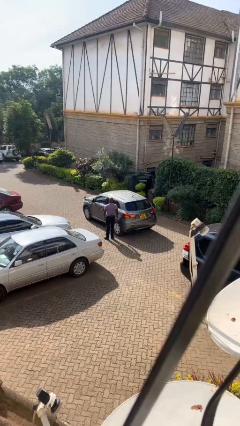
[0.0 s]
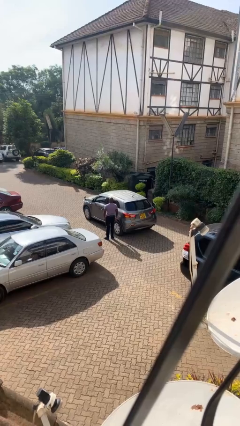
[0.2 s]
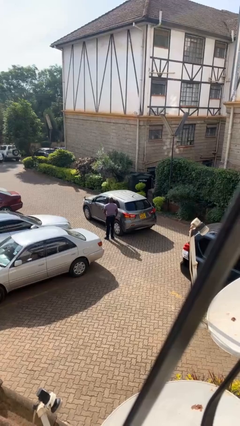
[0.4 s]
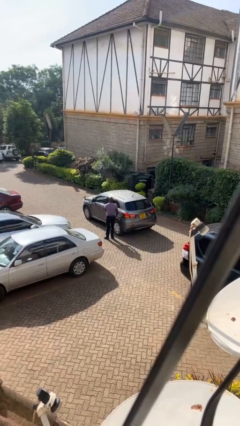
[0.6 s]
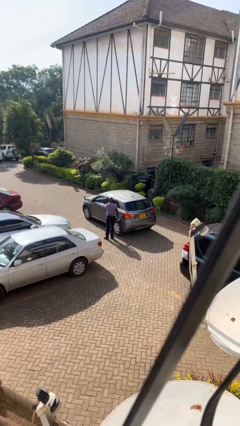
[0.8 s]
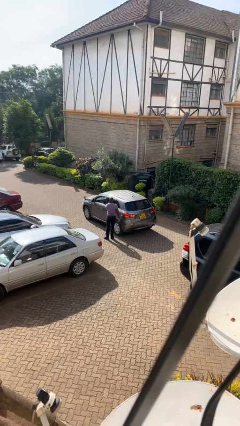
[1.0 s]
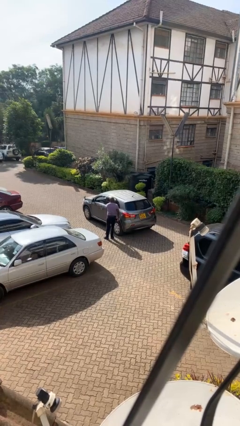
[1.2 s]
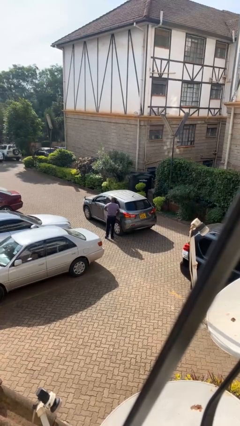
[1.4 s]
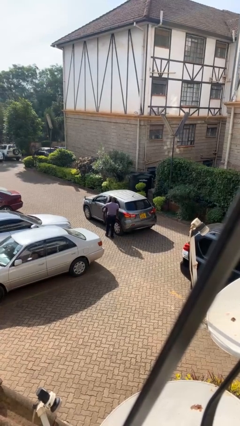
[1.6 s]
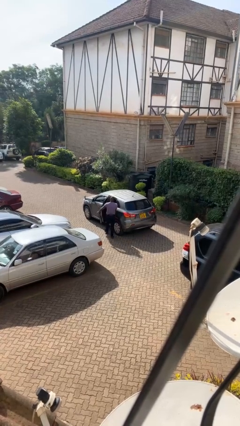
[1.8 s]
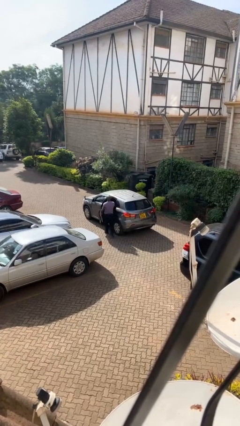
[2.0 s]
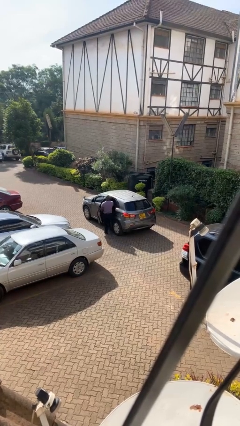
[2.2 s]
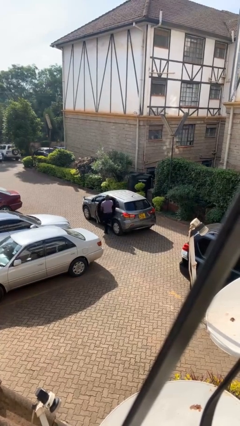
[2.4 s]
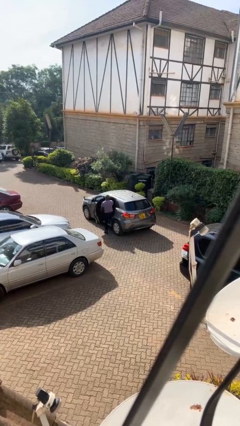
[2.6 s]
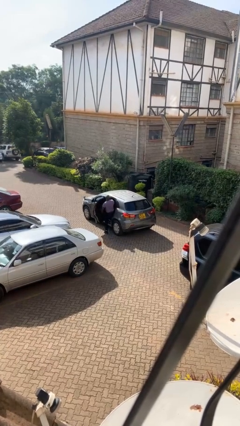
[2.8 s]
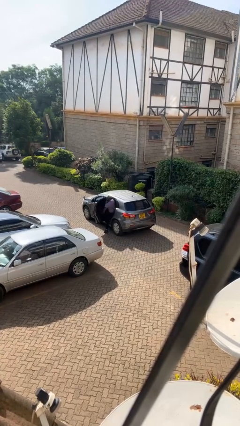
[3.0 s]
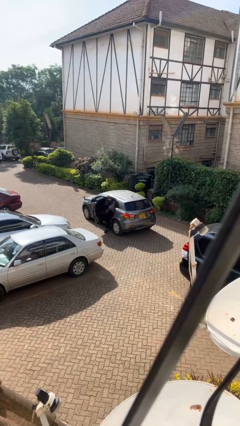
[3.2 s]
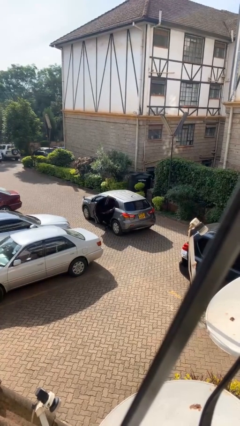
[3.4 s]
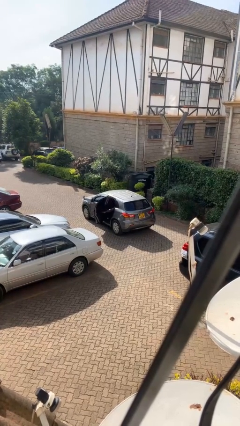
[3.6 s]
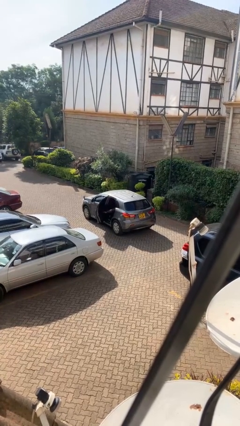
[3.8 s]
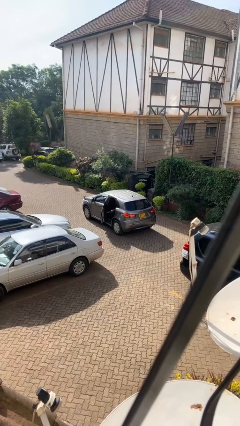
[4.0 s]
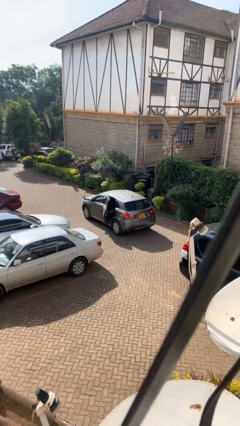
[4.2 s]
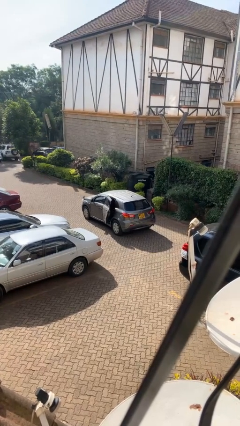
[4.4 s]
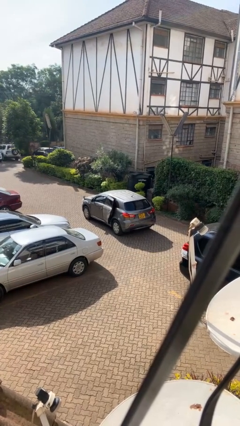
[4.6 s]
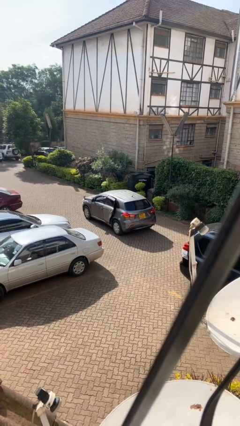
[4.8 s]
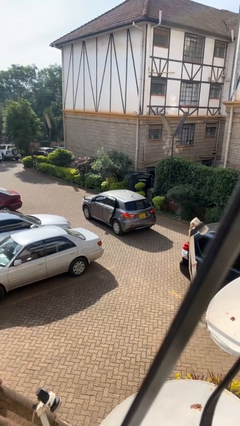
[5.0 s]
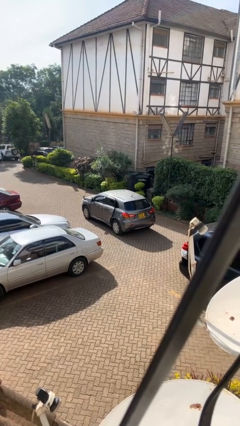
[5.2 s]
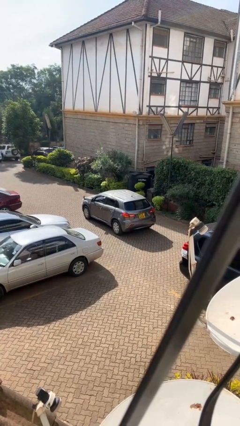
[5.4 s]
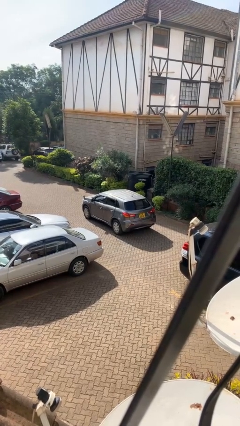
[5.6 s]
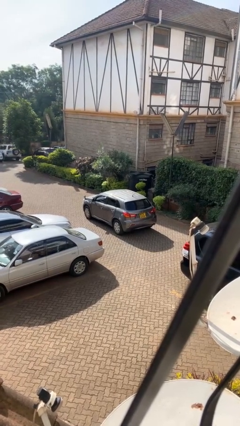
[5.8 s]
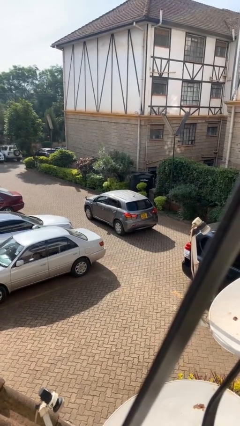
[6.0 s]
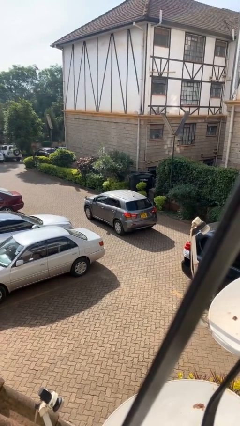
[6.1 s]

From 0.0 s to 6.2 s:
car picks up person

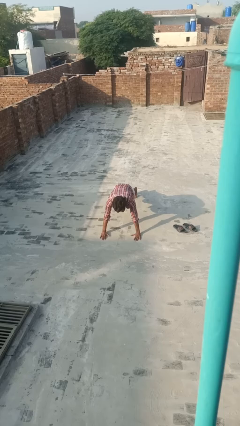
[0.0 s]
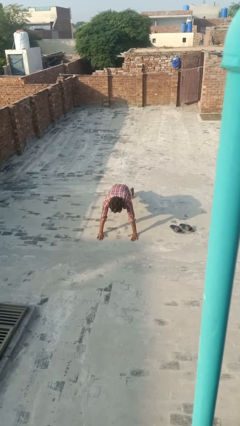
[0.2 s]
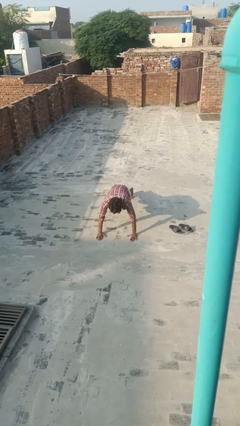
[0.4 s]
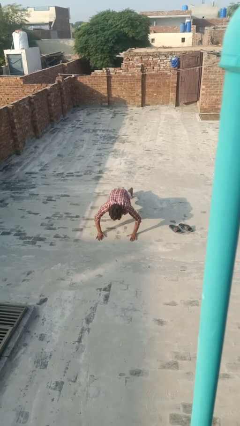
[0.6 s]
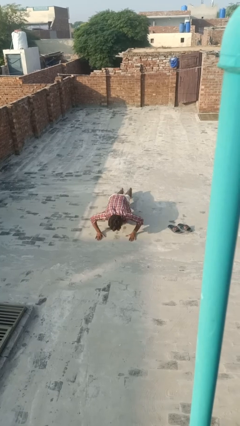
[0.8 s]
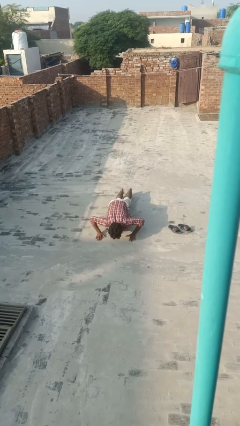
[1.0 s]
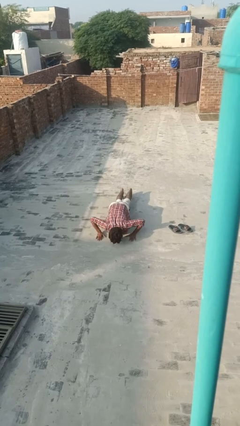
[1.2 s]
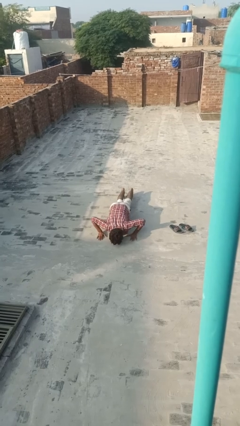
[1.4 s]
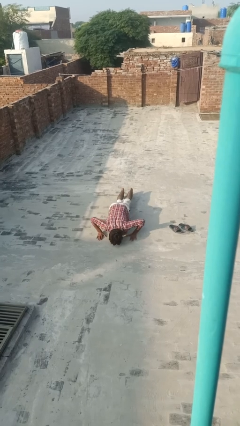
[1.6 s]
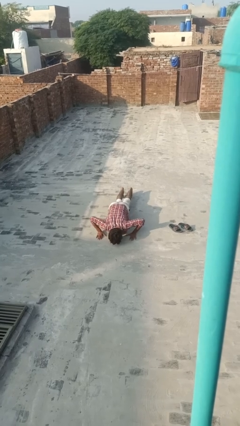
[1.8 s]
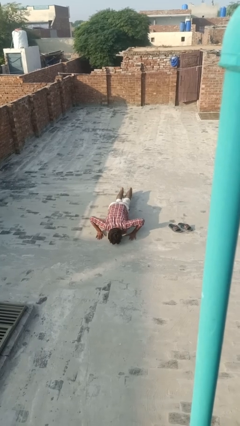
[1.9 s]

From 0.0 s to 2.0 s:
person exercises with pushup

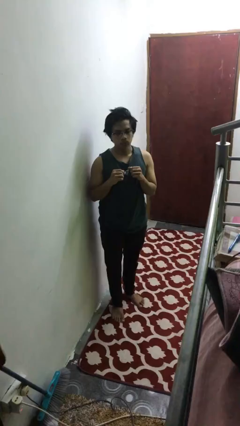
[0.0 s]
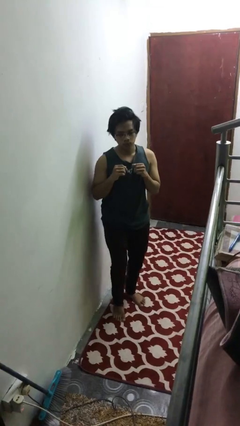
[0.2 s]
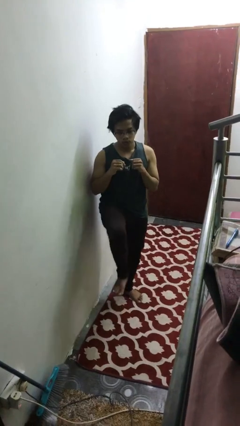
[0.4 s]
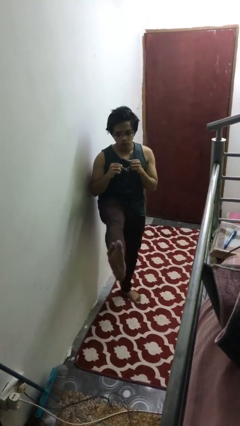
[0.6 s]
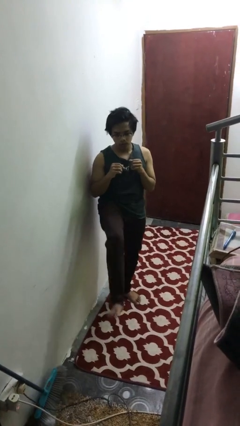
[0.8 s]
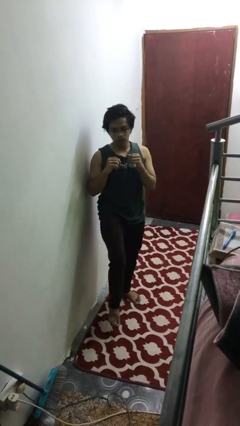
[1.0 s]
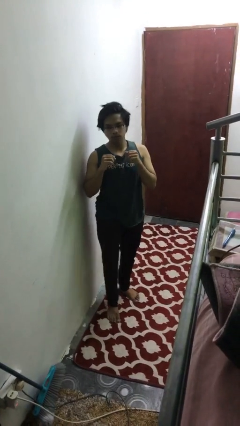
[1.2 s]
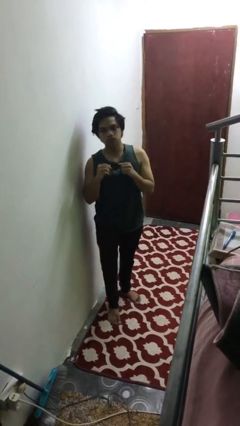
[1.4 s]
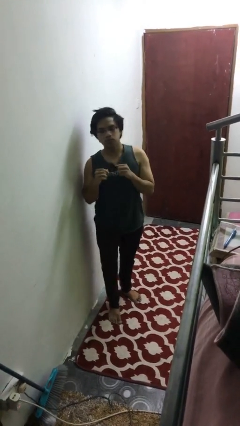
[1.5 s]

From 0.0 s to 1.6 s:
person karate kicks

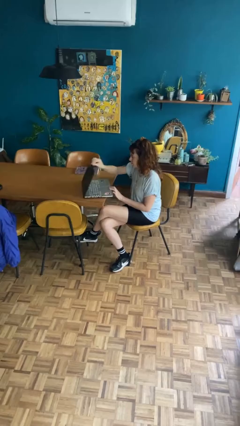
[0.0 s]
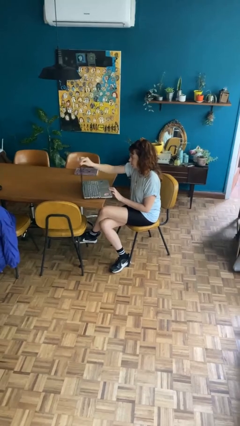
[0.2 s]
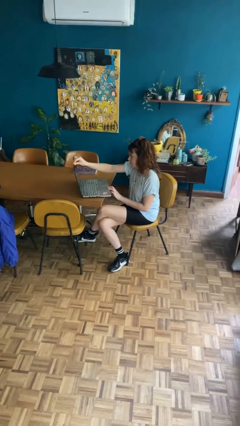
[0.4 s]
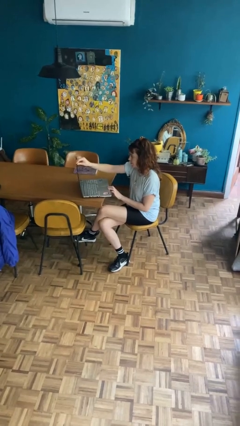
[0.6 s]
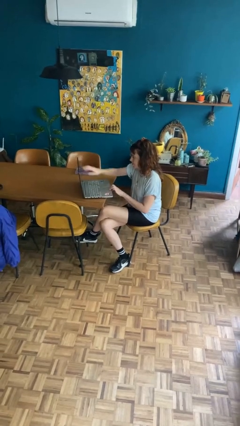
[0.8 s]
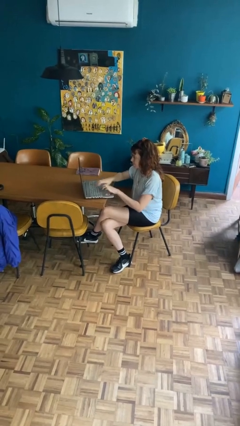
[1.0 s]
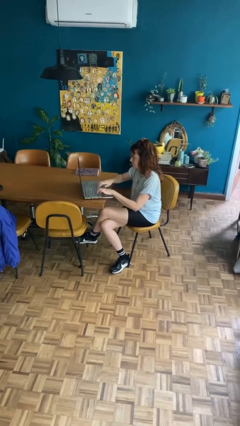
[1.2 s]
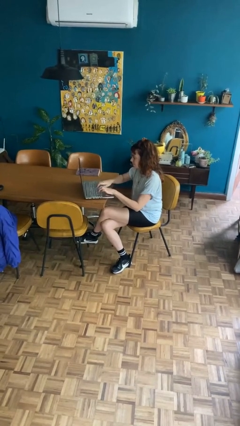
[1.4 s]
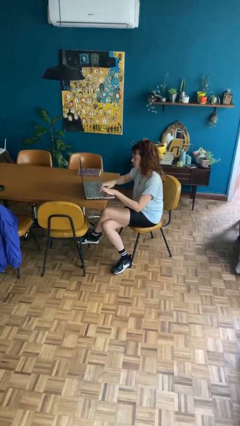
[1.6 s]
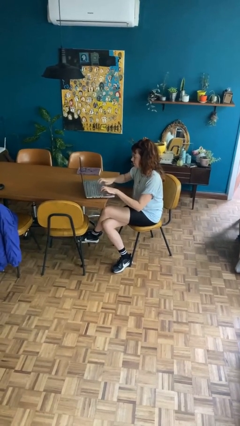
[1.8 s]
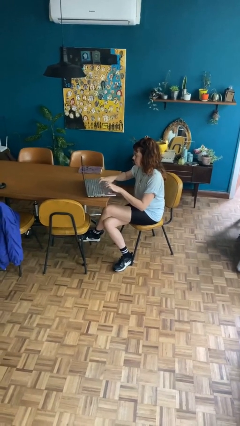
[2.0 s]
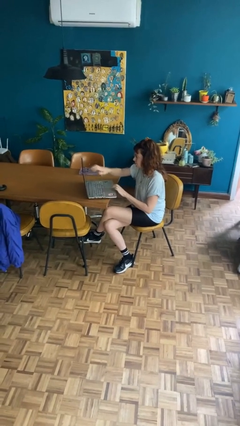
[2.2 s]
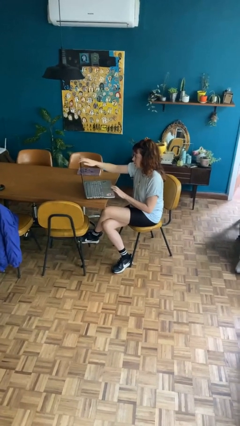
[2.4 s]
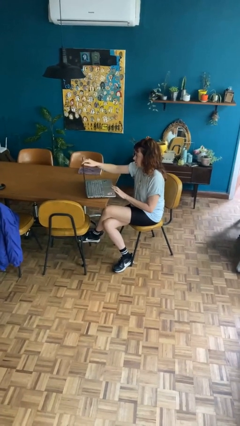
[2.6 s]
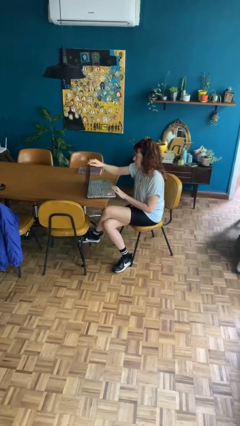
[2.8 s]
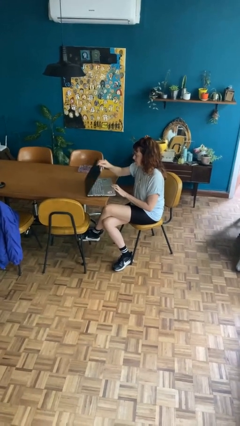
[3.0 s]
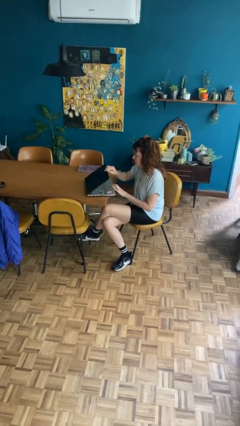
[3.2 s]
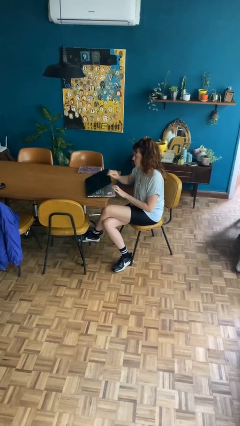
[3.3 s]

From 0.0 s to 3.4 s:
person interacts with laptop

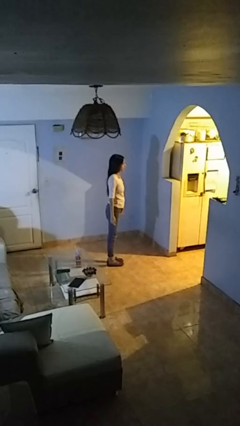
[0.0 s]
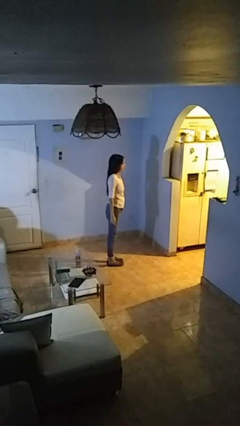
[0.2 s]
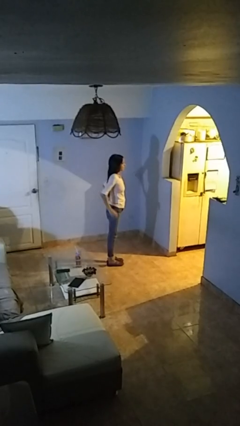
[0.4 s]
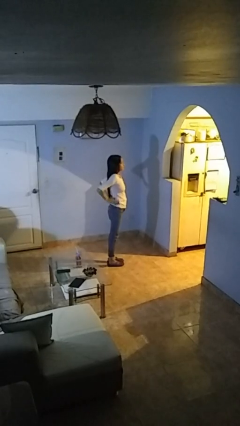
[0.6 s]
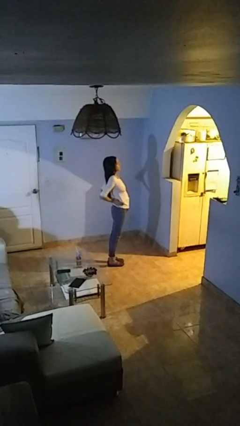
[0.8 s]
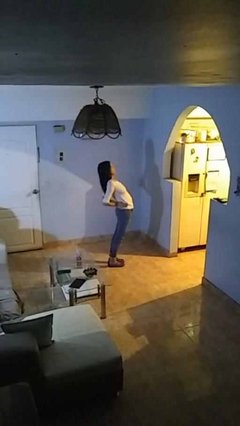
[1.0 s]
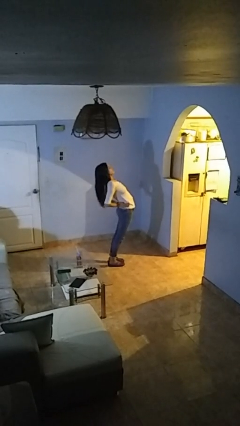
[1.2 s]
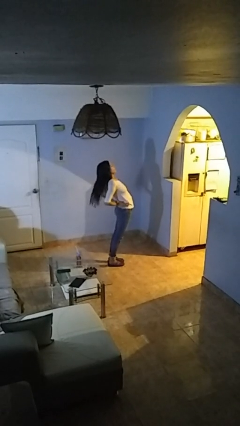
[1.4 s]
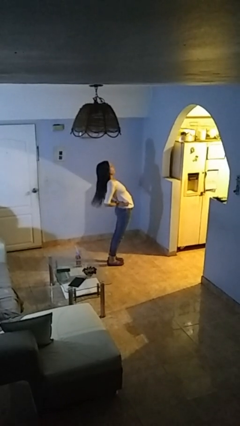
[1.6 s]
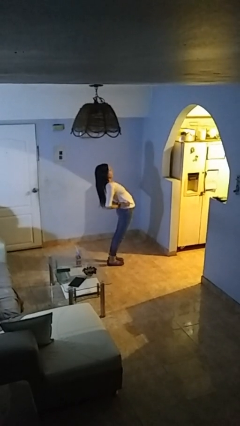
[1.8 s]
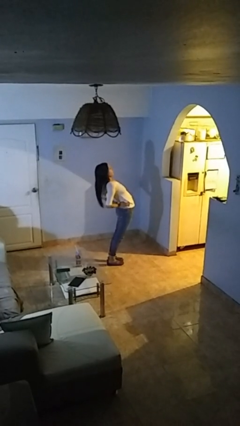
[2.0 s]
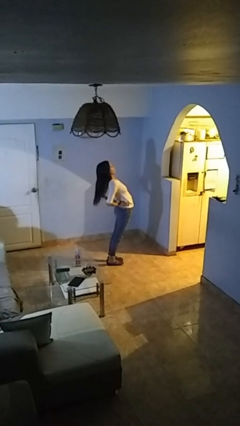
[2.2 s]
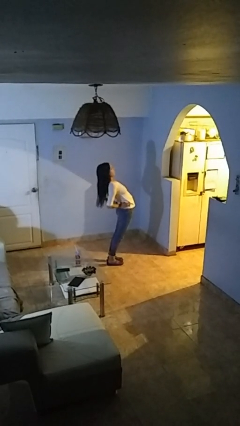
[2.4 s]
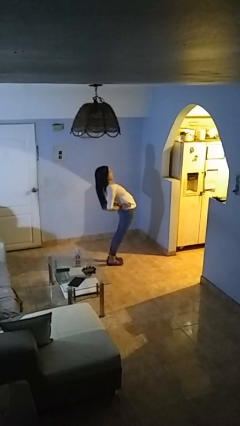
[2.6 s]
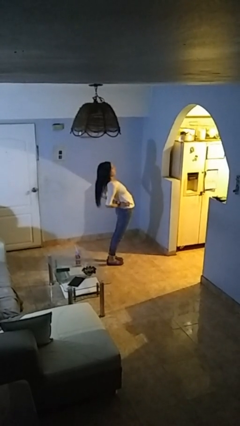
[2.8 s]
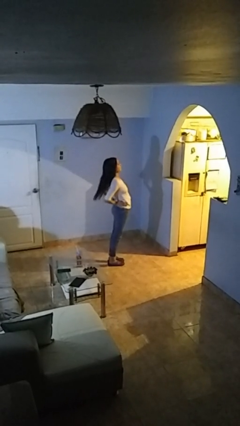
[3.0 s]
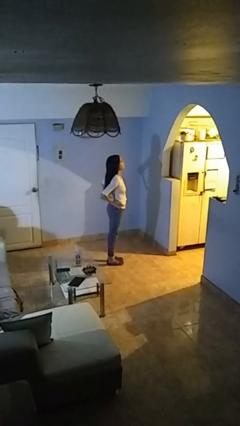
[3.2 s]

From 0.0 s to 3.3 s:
person stretches back

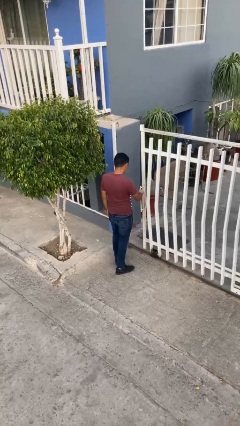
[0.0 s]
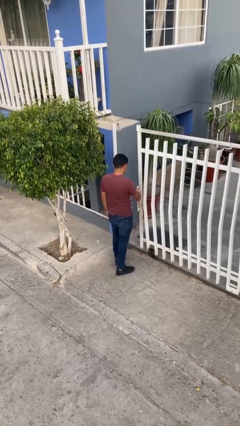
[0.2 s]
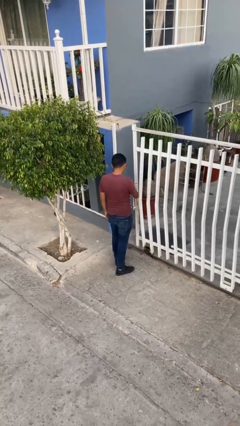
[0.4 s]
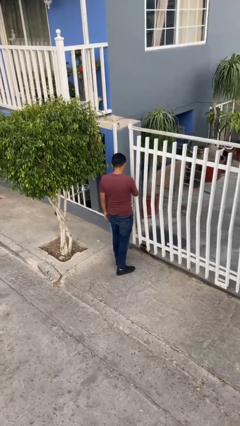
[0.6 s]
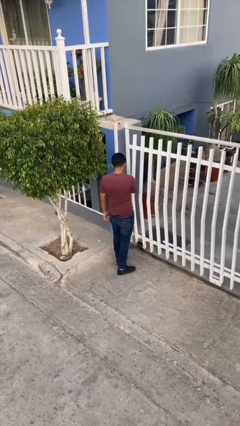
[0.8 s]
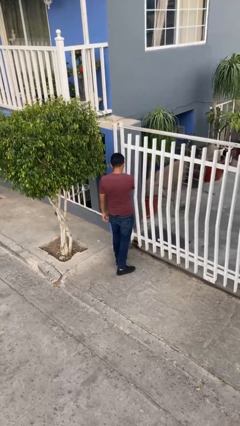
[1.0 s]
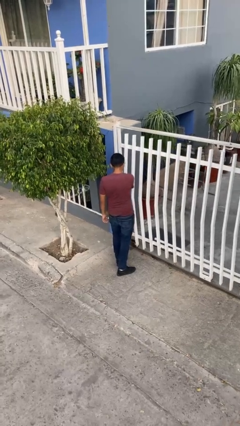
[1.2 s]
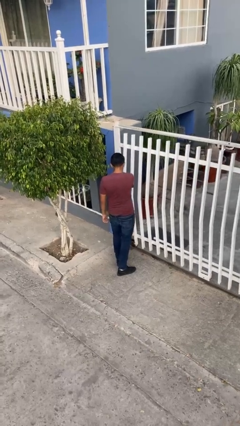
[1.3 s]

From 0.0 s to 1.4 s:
person closes facility door
